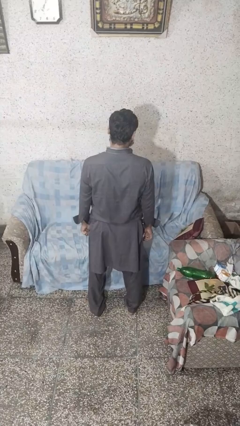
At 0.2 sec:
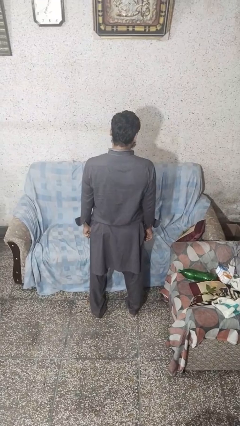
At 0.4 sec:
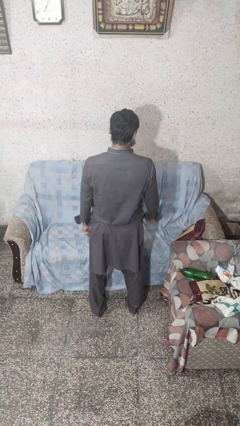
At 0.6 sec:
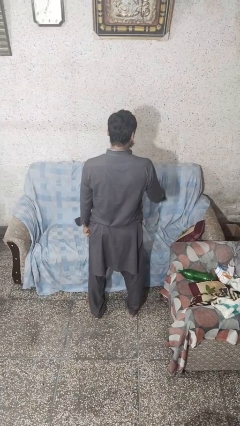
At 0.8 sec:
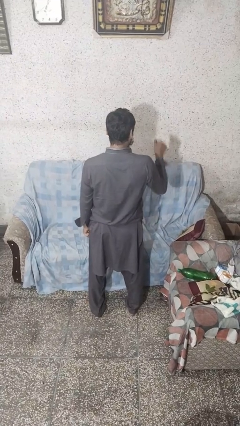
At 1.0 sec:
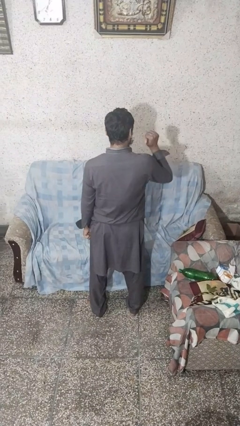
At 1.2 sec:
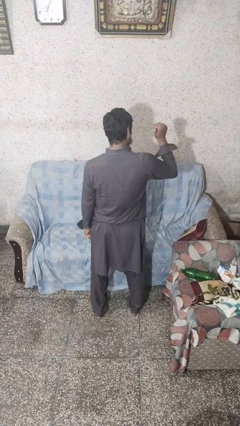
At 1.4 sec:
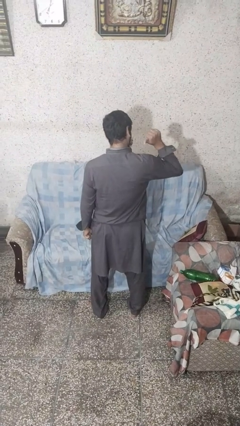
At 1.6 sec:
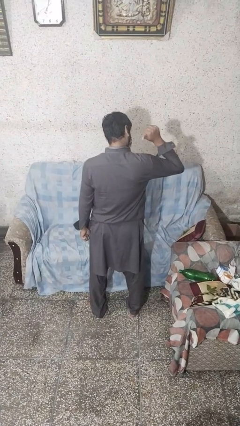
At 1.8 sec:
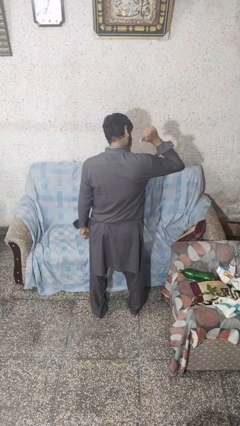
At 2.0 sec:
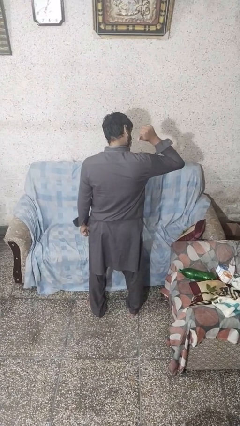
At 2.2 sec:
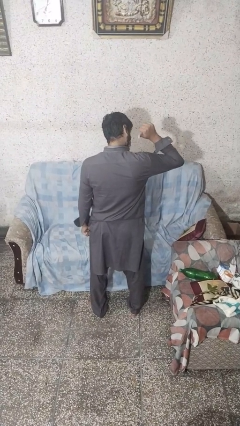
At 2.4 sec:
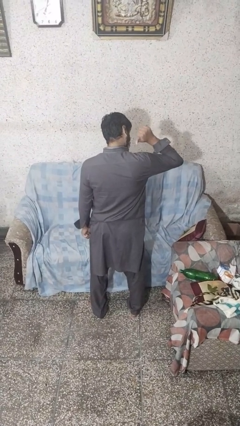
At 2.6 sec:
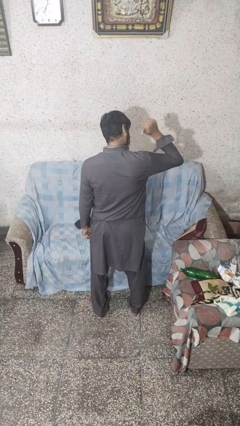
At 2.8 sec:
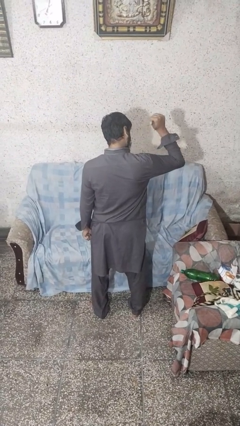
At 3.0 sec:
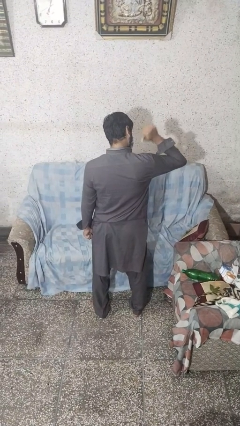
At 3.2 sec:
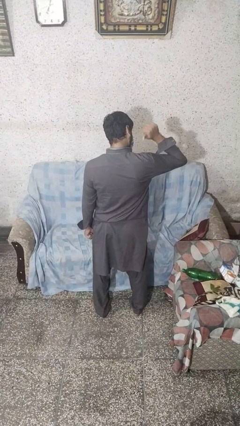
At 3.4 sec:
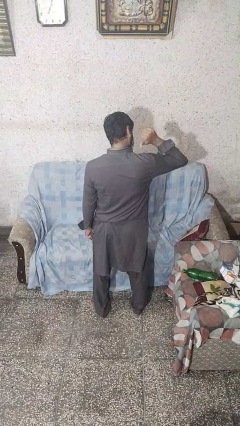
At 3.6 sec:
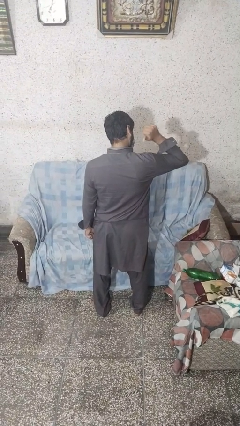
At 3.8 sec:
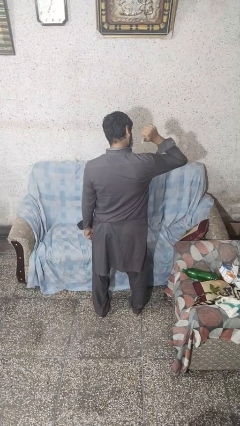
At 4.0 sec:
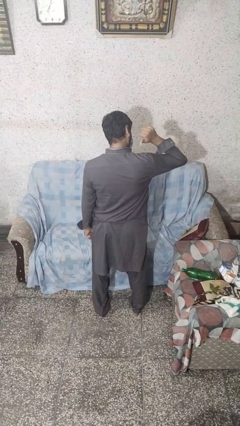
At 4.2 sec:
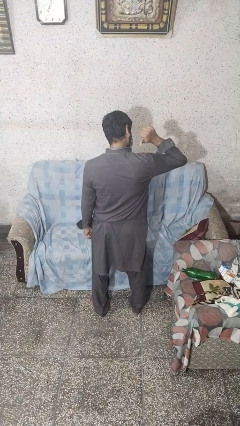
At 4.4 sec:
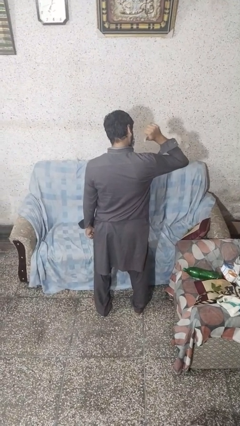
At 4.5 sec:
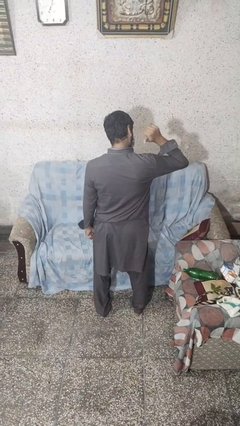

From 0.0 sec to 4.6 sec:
person gestures behind me

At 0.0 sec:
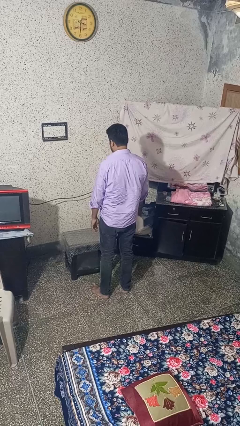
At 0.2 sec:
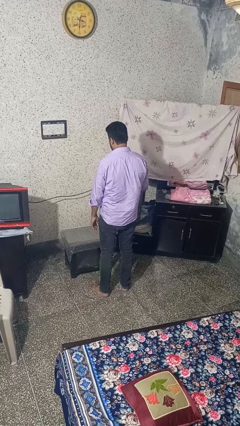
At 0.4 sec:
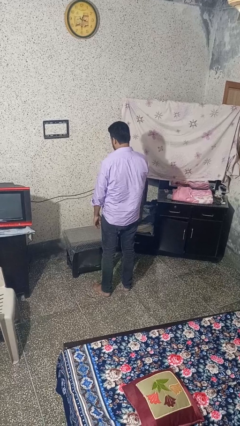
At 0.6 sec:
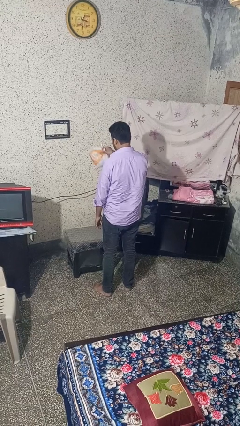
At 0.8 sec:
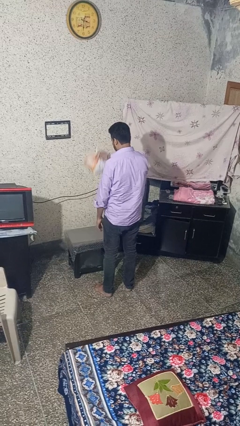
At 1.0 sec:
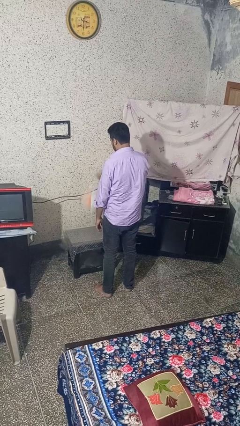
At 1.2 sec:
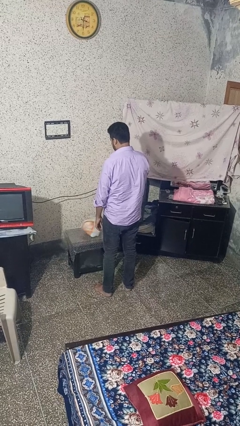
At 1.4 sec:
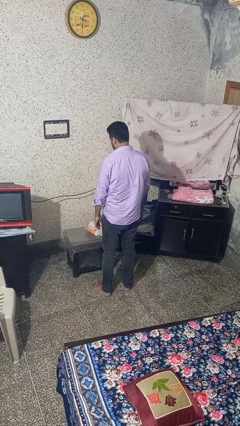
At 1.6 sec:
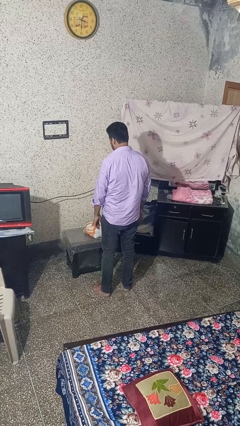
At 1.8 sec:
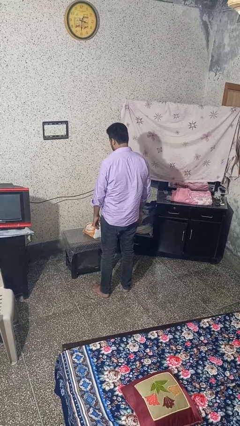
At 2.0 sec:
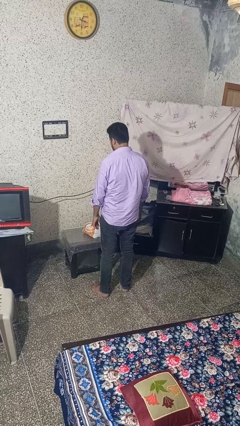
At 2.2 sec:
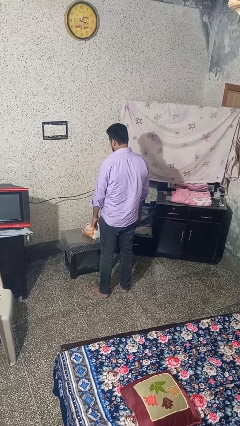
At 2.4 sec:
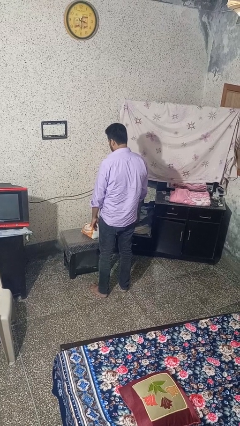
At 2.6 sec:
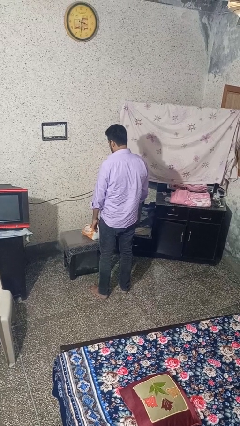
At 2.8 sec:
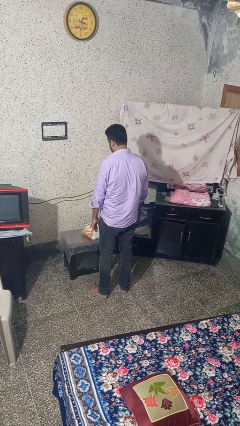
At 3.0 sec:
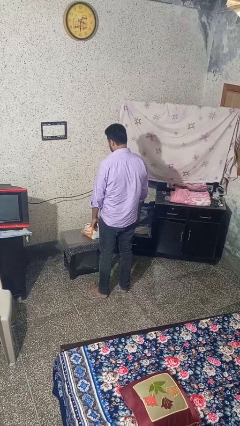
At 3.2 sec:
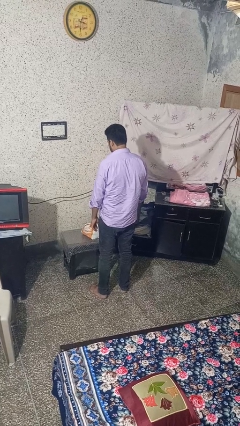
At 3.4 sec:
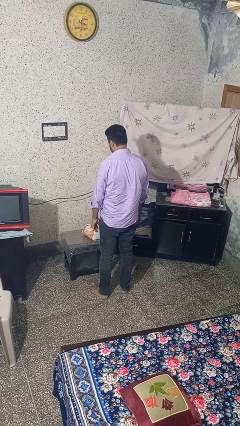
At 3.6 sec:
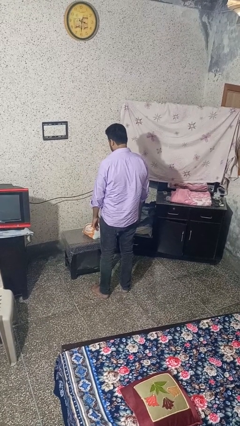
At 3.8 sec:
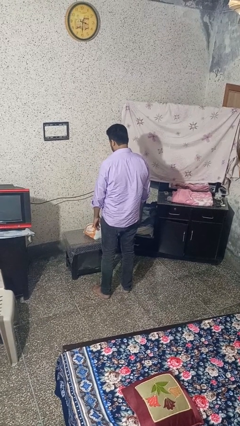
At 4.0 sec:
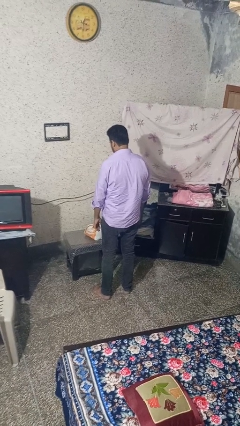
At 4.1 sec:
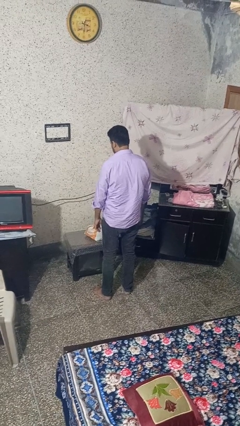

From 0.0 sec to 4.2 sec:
person throws object on table

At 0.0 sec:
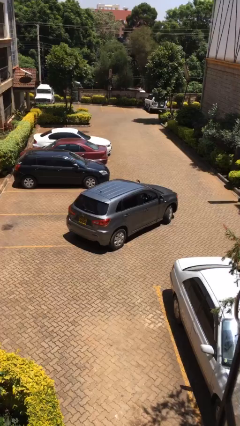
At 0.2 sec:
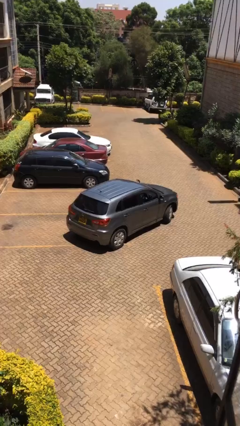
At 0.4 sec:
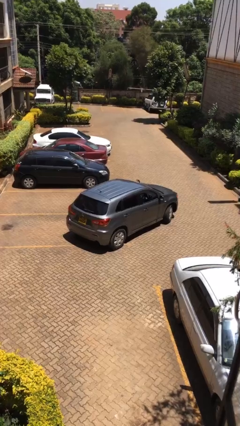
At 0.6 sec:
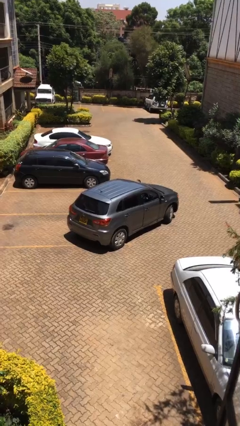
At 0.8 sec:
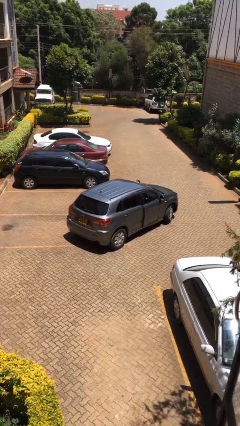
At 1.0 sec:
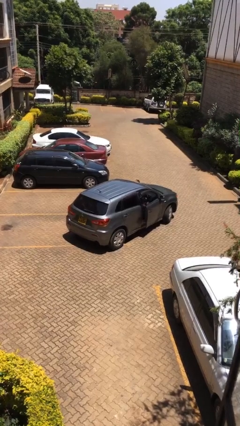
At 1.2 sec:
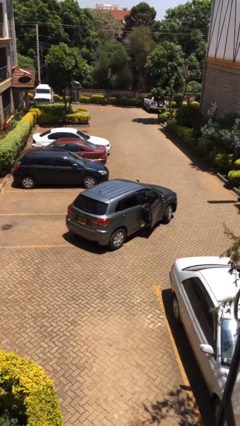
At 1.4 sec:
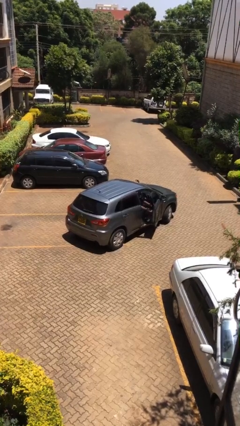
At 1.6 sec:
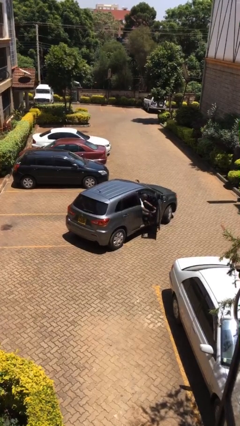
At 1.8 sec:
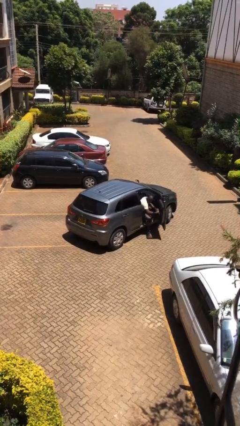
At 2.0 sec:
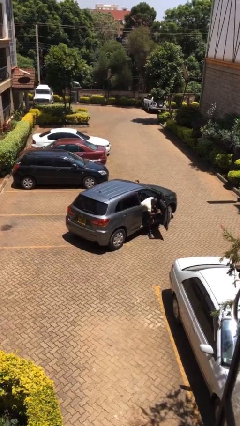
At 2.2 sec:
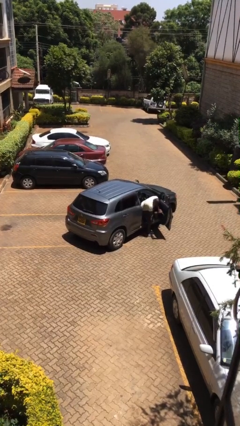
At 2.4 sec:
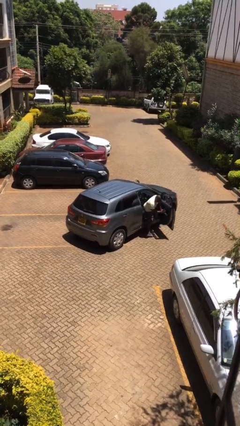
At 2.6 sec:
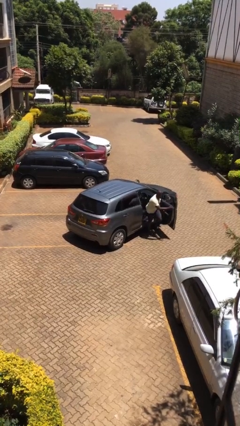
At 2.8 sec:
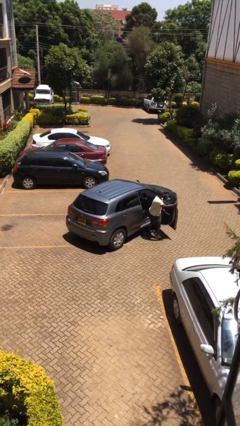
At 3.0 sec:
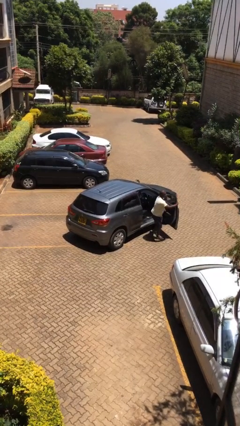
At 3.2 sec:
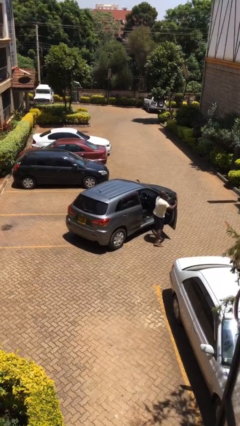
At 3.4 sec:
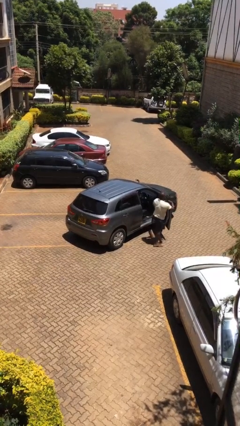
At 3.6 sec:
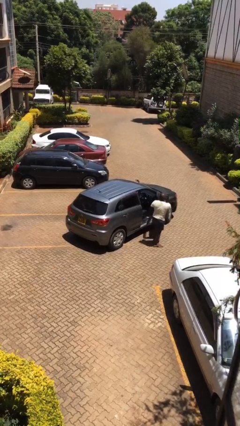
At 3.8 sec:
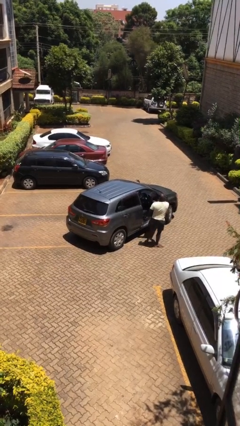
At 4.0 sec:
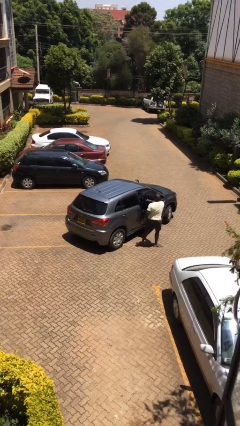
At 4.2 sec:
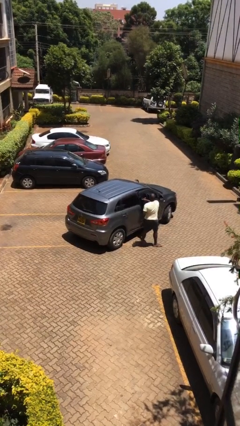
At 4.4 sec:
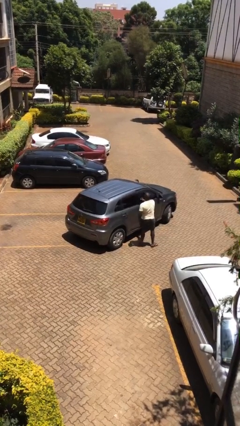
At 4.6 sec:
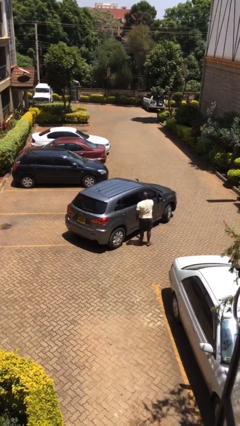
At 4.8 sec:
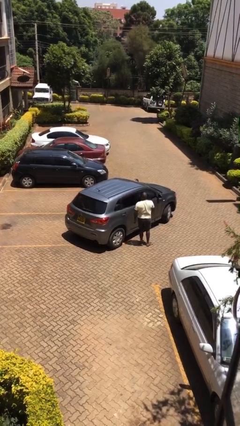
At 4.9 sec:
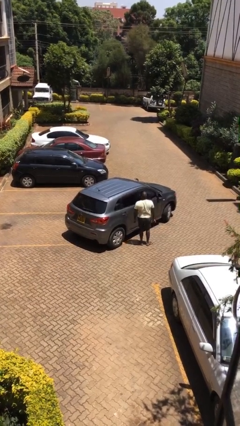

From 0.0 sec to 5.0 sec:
car drops off person

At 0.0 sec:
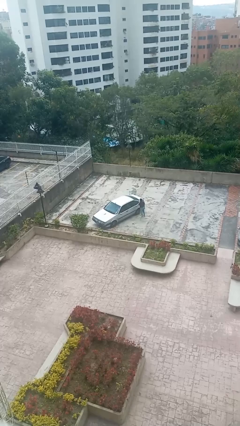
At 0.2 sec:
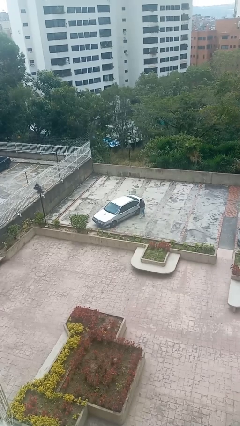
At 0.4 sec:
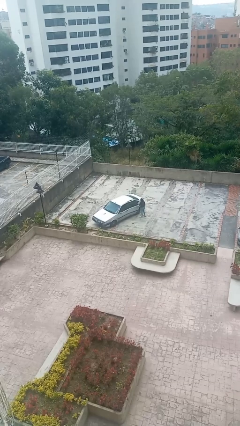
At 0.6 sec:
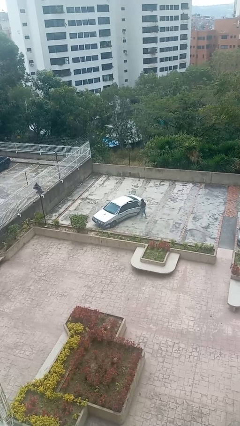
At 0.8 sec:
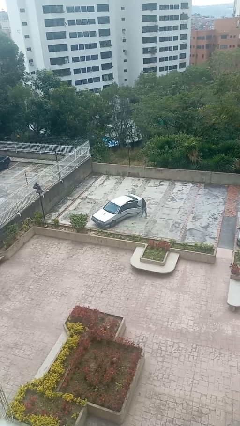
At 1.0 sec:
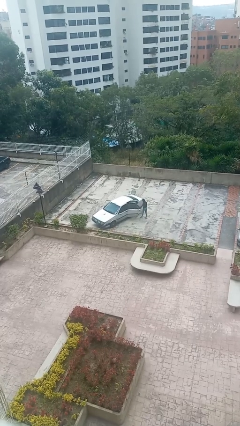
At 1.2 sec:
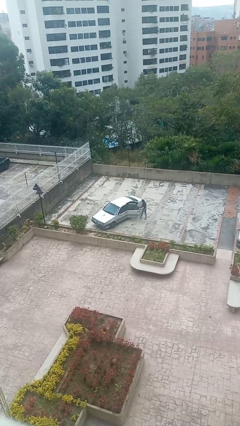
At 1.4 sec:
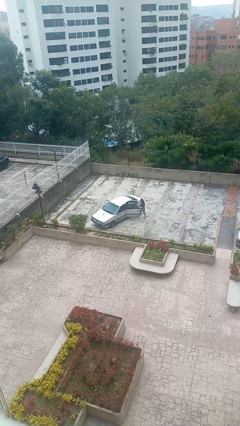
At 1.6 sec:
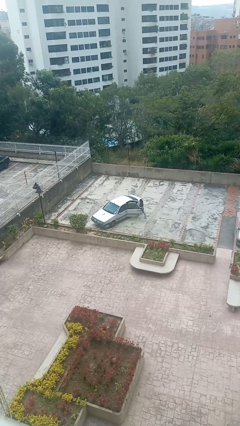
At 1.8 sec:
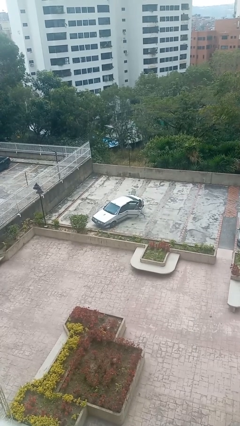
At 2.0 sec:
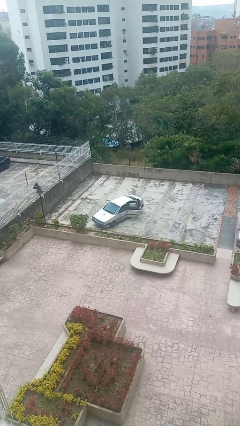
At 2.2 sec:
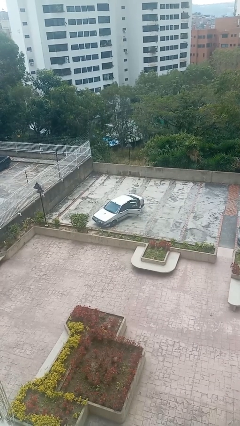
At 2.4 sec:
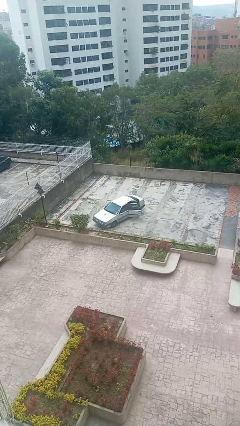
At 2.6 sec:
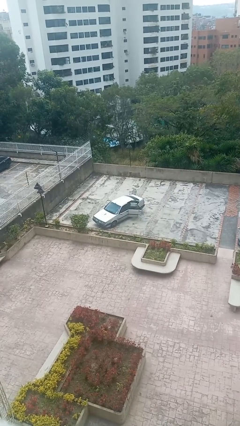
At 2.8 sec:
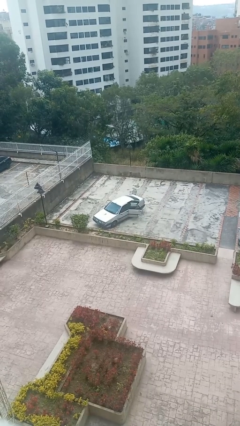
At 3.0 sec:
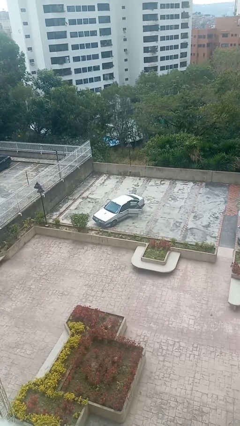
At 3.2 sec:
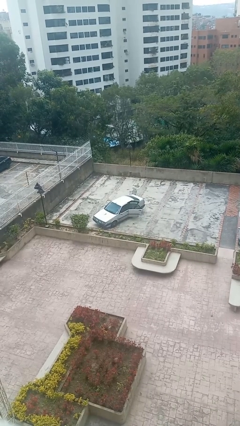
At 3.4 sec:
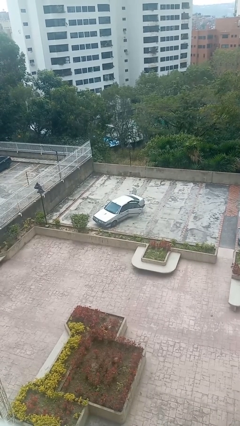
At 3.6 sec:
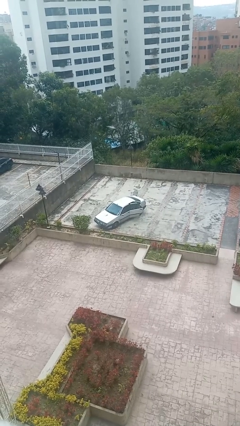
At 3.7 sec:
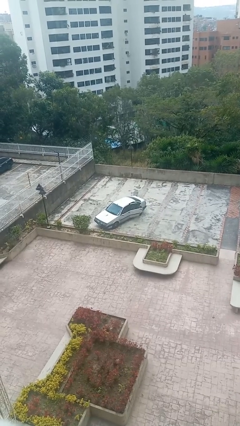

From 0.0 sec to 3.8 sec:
car picks up person

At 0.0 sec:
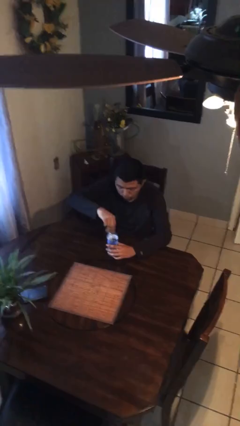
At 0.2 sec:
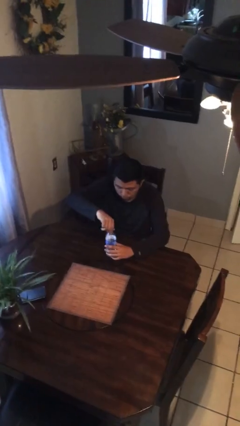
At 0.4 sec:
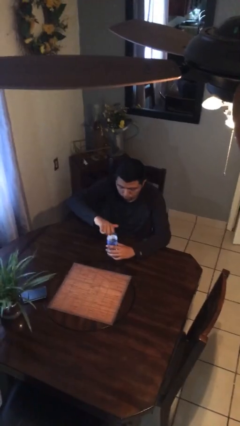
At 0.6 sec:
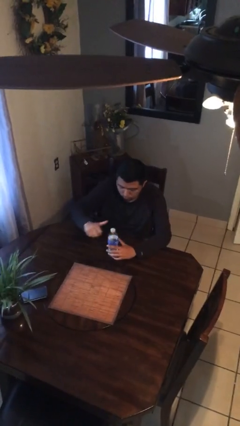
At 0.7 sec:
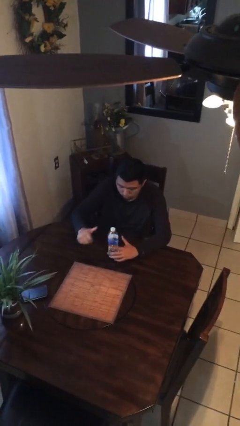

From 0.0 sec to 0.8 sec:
person screws lid to bottle
